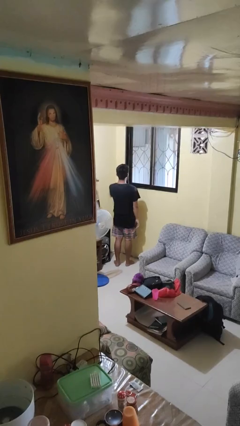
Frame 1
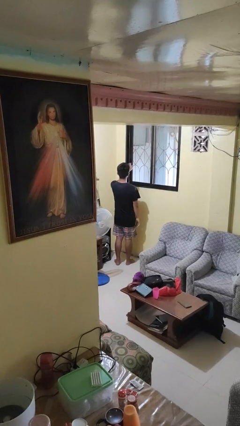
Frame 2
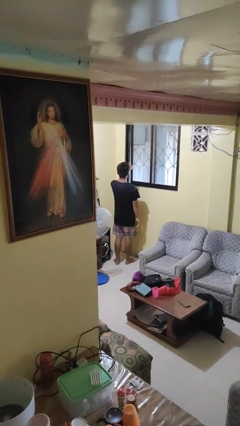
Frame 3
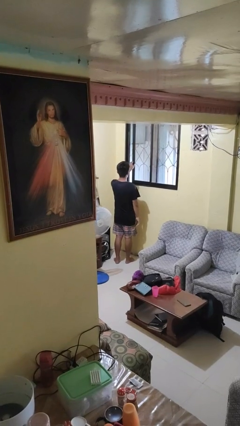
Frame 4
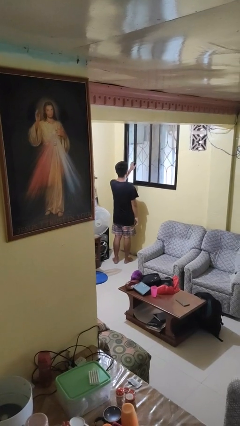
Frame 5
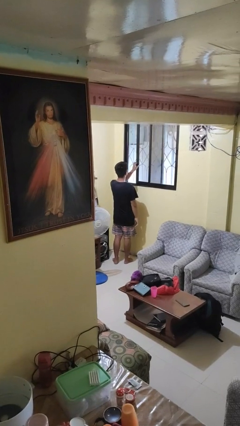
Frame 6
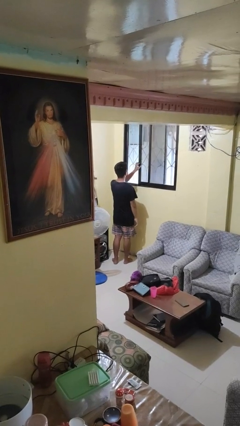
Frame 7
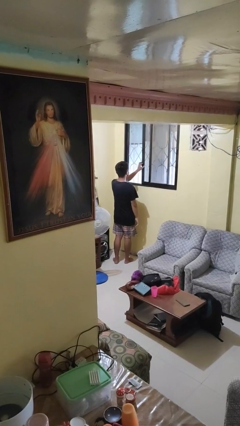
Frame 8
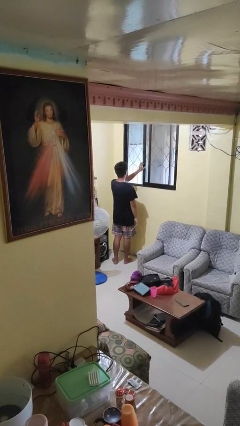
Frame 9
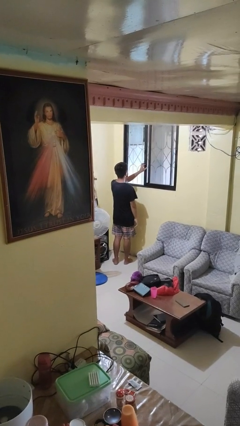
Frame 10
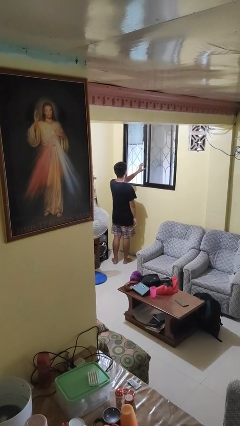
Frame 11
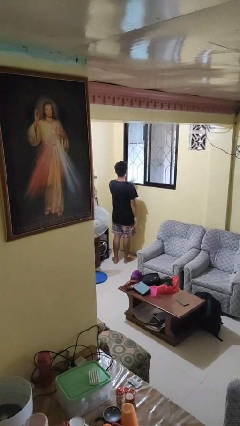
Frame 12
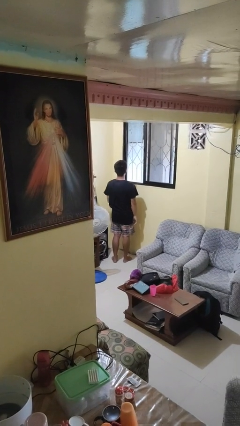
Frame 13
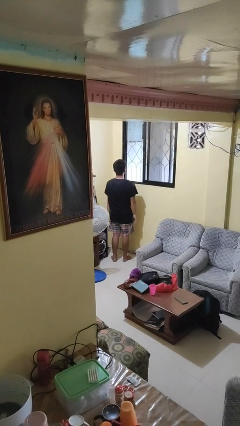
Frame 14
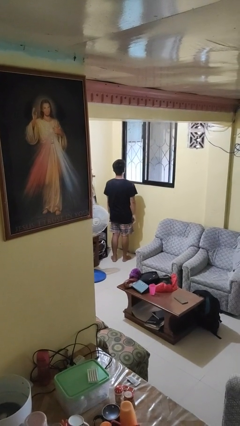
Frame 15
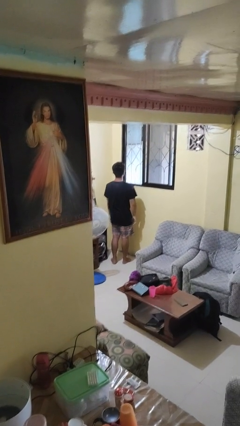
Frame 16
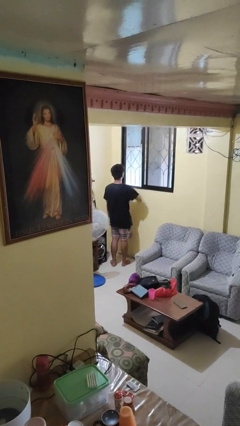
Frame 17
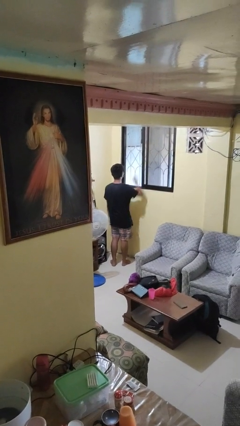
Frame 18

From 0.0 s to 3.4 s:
person opens home window

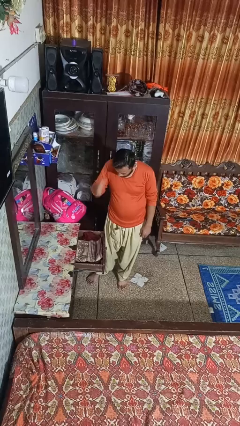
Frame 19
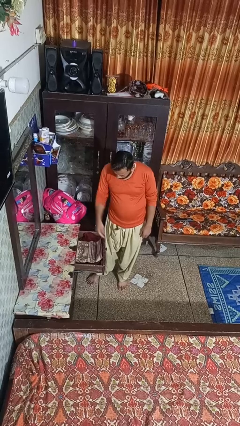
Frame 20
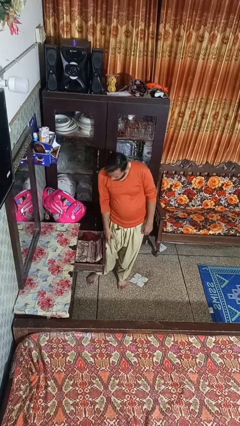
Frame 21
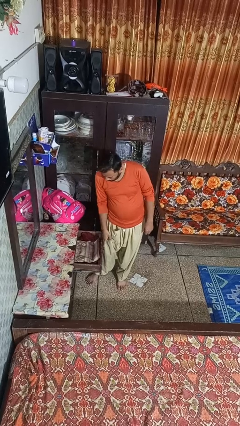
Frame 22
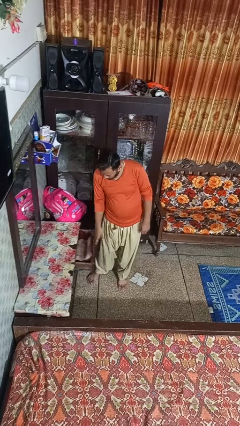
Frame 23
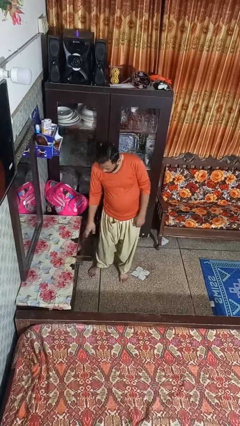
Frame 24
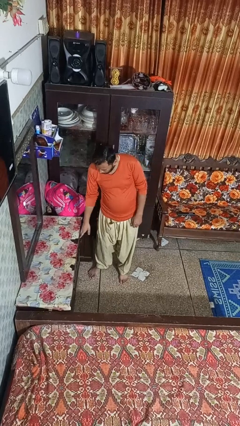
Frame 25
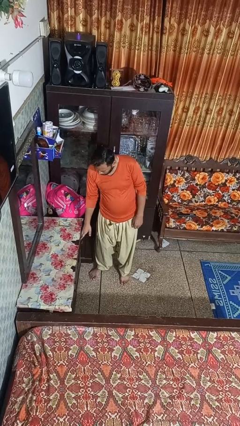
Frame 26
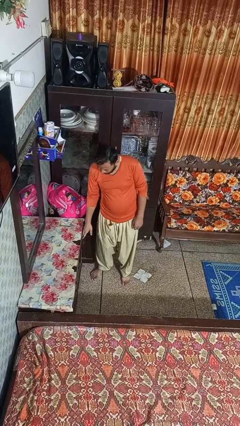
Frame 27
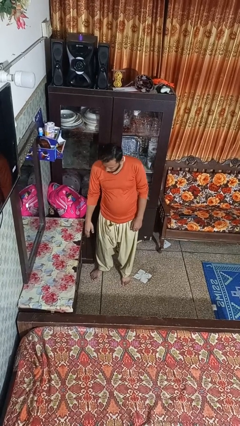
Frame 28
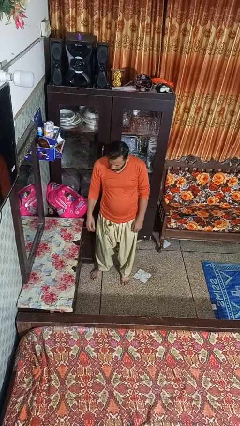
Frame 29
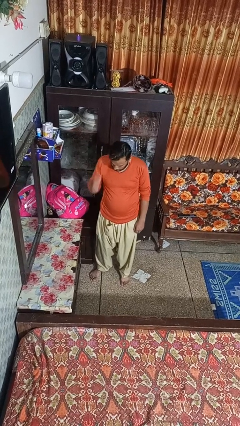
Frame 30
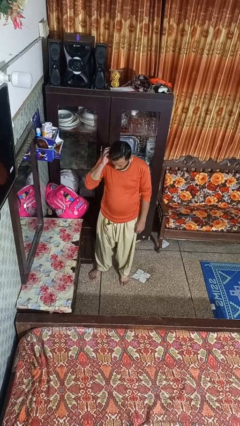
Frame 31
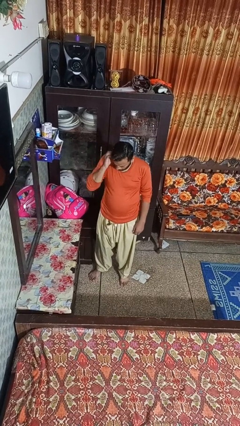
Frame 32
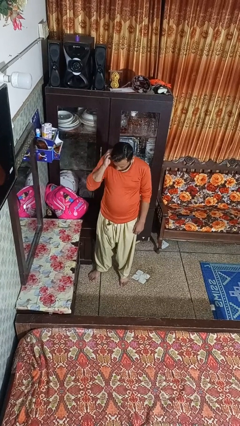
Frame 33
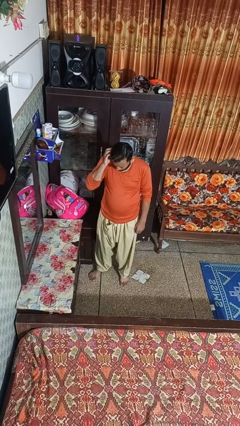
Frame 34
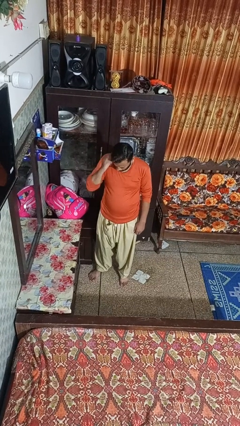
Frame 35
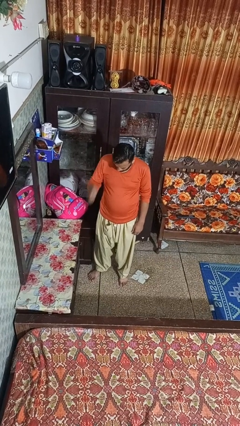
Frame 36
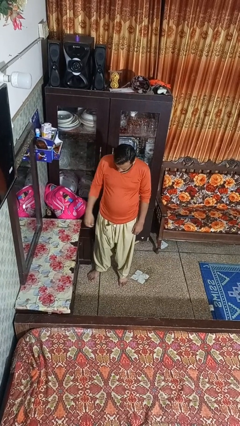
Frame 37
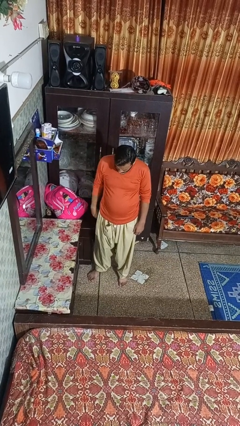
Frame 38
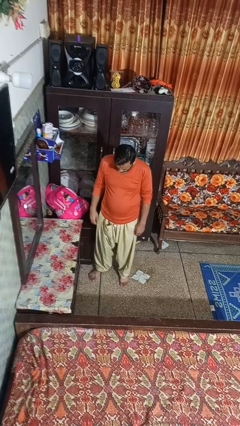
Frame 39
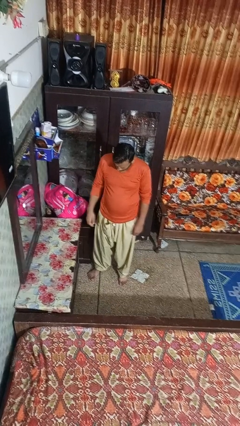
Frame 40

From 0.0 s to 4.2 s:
person closes dresser drawer

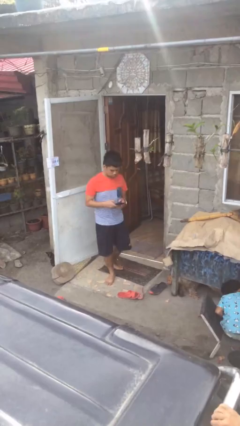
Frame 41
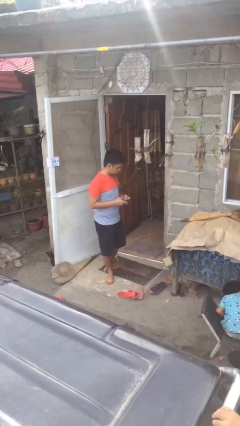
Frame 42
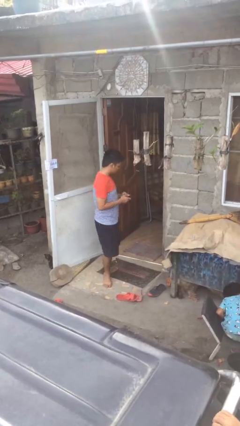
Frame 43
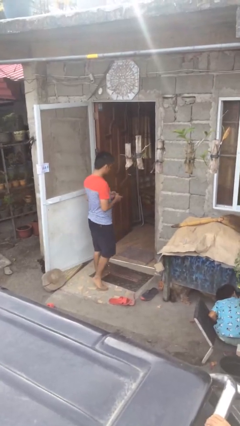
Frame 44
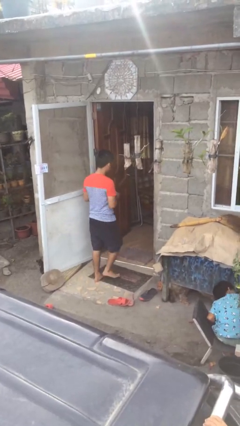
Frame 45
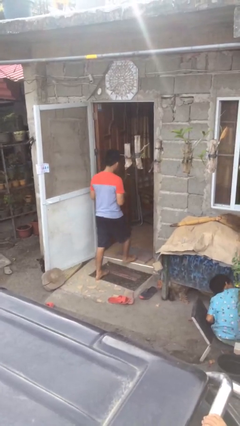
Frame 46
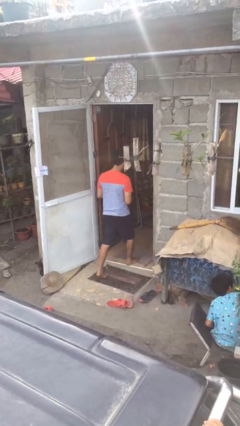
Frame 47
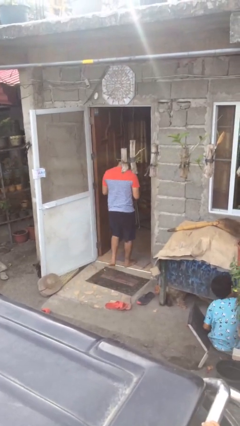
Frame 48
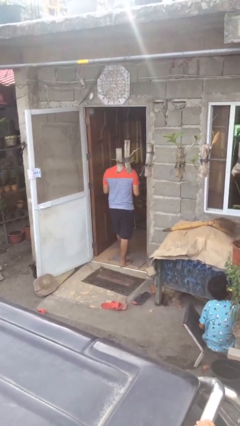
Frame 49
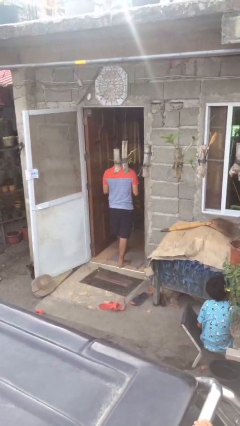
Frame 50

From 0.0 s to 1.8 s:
person exits scene through structure

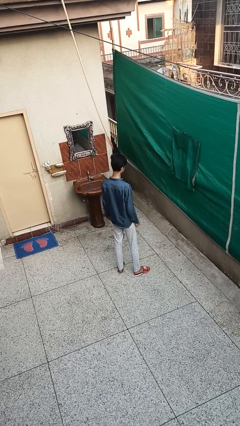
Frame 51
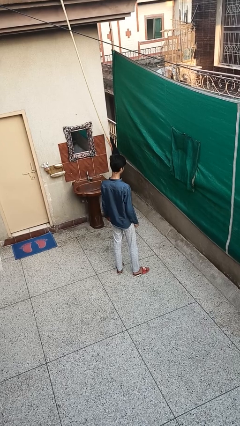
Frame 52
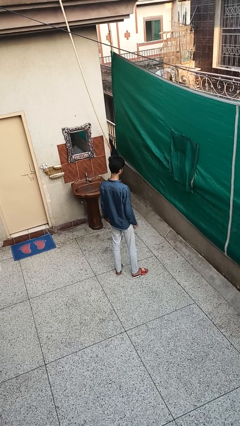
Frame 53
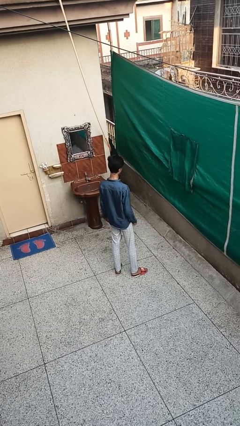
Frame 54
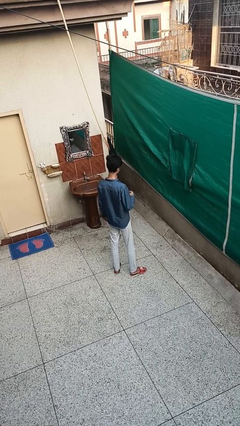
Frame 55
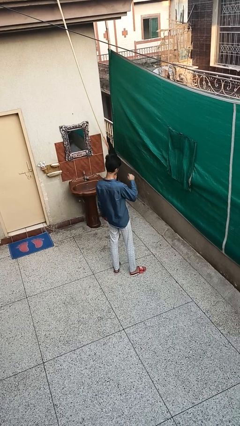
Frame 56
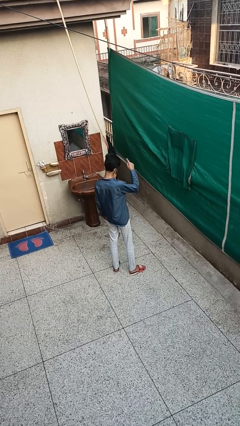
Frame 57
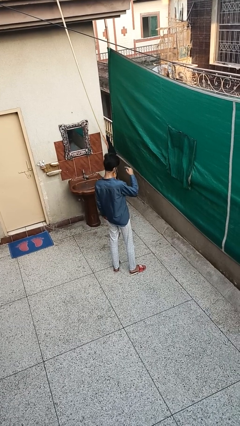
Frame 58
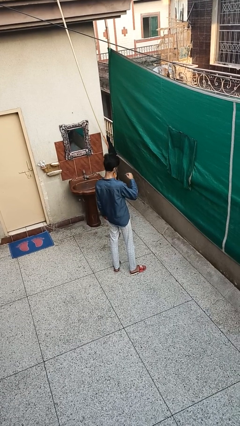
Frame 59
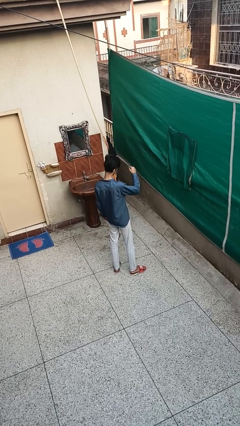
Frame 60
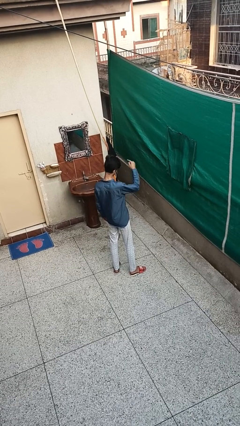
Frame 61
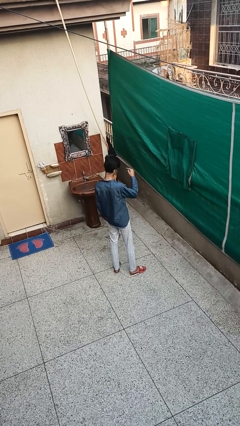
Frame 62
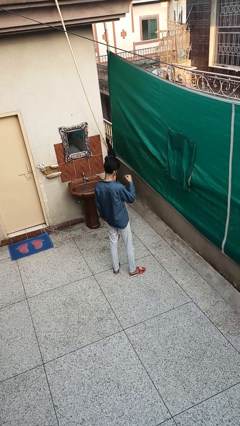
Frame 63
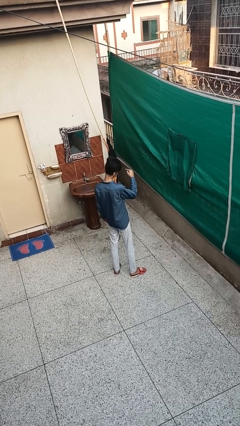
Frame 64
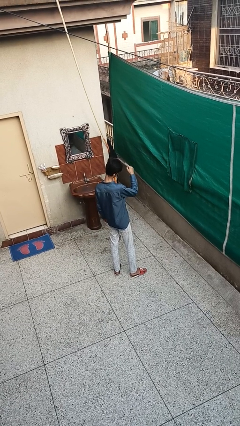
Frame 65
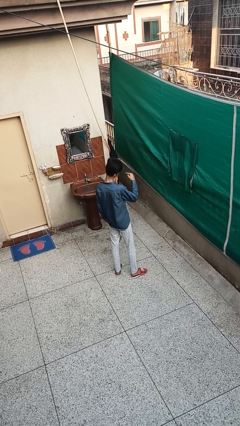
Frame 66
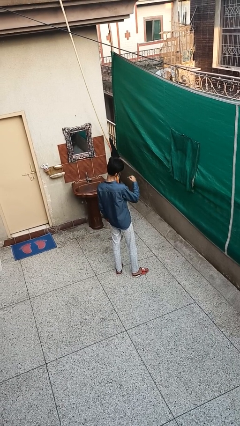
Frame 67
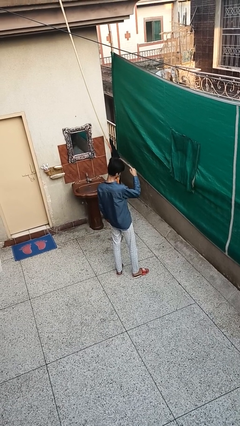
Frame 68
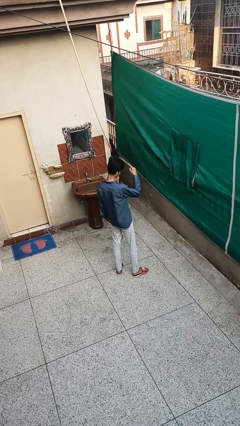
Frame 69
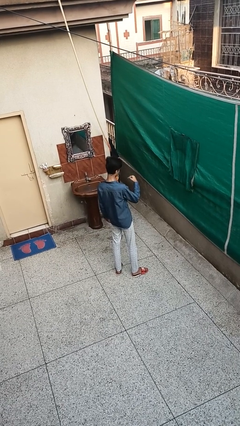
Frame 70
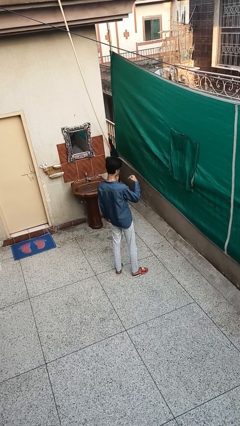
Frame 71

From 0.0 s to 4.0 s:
person gestures swipe up

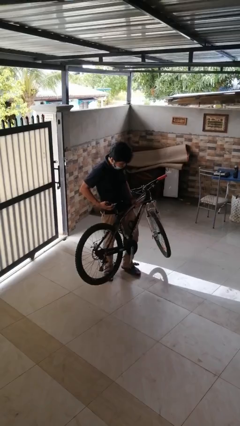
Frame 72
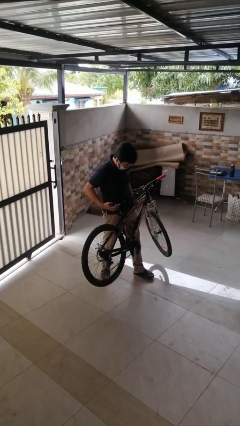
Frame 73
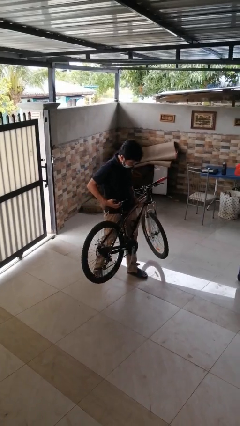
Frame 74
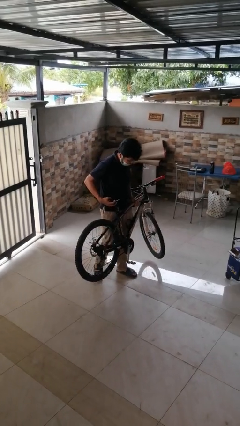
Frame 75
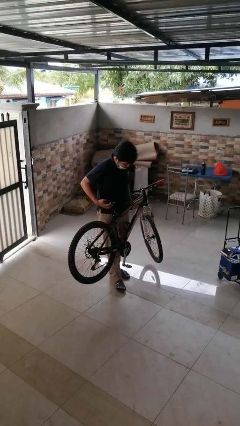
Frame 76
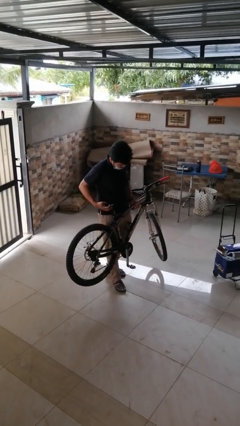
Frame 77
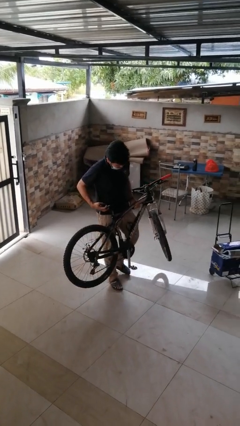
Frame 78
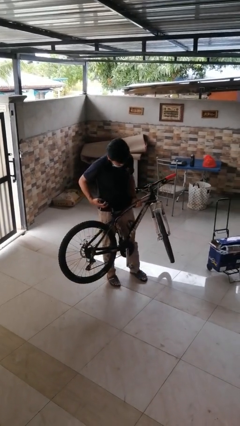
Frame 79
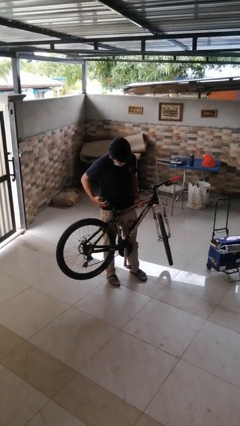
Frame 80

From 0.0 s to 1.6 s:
person carries bicycle

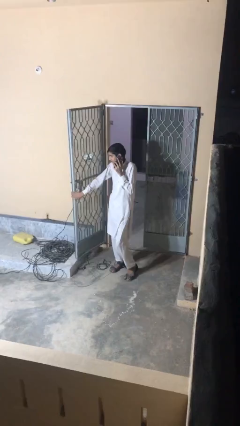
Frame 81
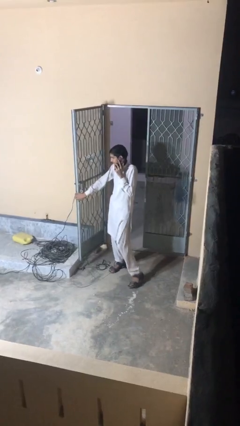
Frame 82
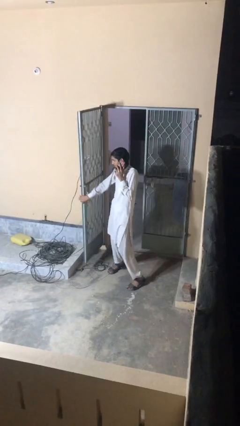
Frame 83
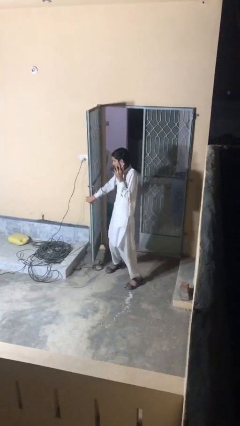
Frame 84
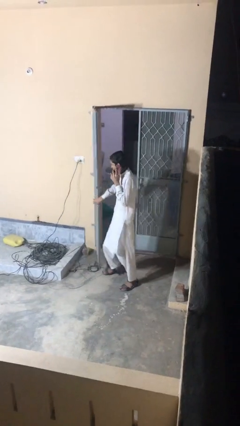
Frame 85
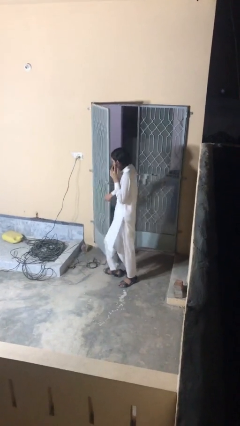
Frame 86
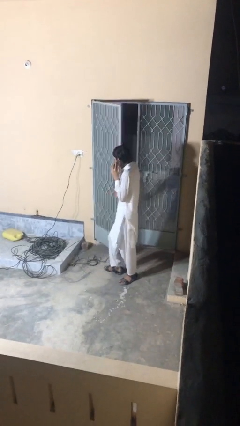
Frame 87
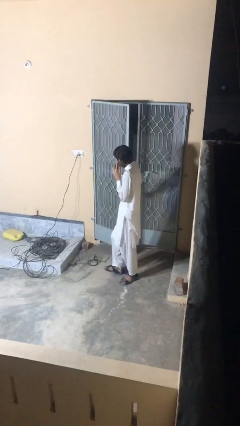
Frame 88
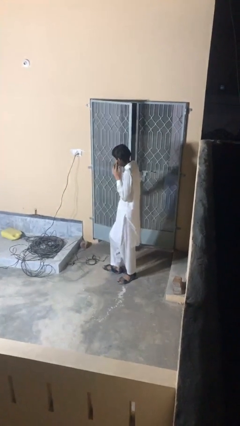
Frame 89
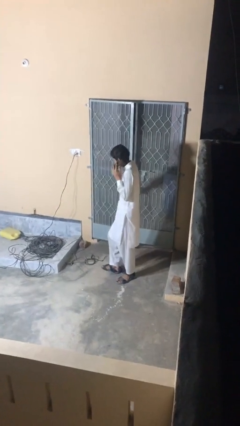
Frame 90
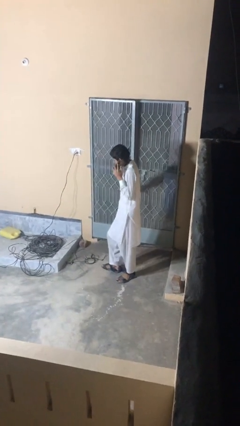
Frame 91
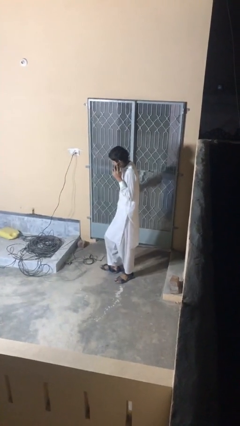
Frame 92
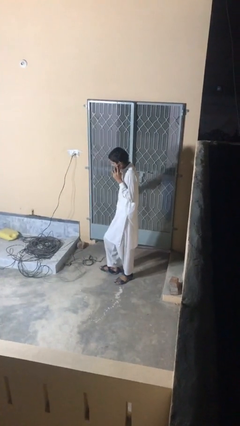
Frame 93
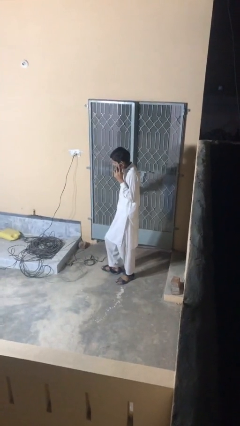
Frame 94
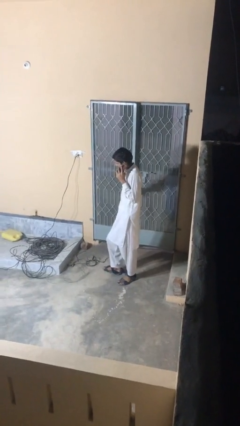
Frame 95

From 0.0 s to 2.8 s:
person closes facility door
